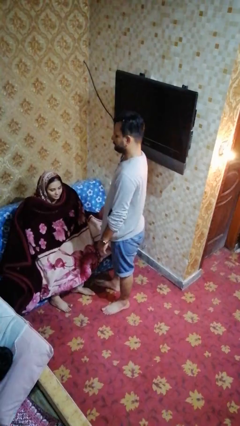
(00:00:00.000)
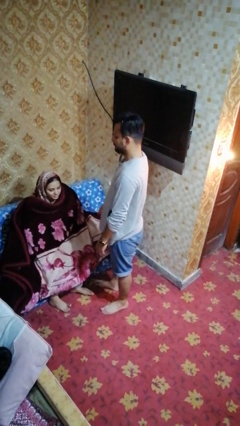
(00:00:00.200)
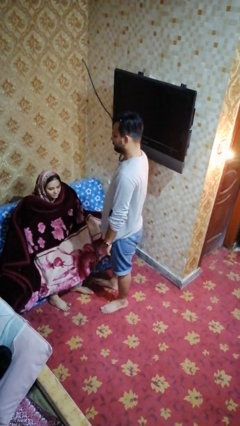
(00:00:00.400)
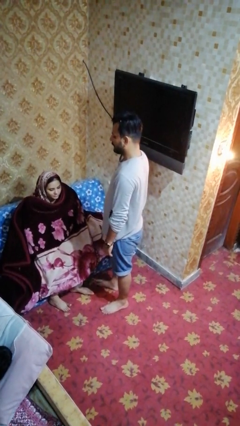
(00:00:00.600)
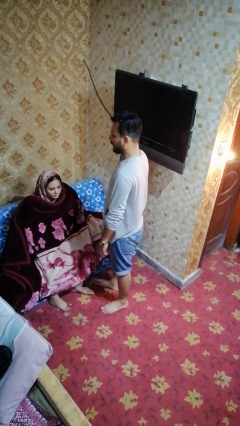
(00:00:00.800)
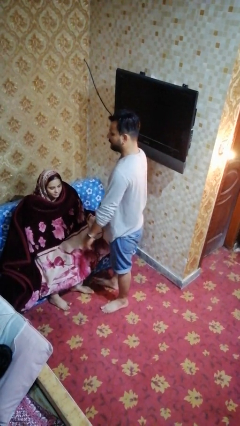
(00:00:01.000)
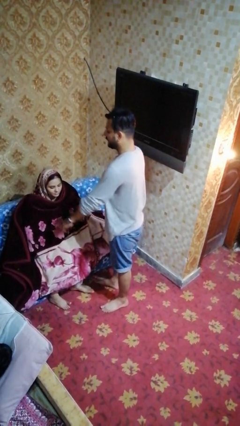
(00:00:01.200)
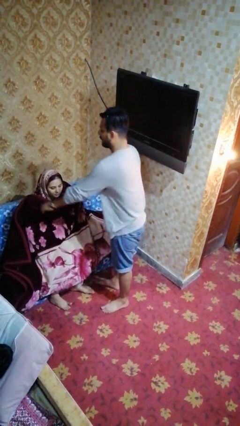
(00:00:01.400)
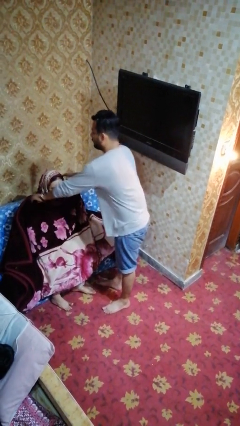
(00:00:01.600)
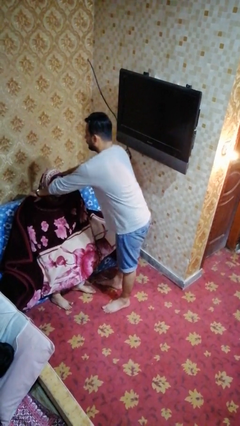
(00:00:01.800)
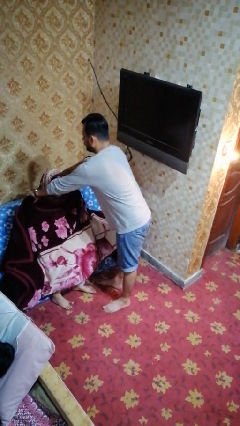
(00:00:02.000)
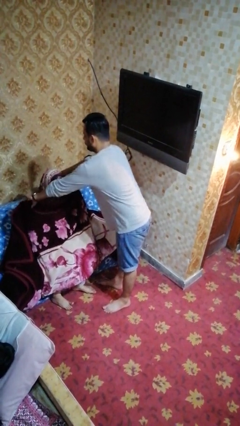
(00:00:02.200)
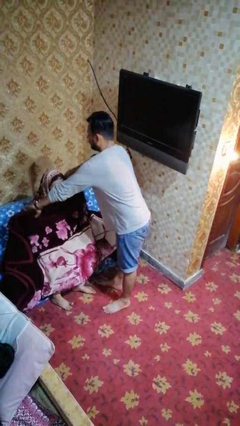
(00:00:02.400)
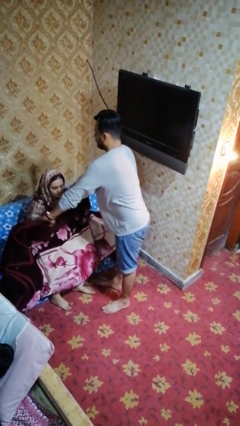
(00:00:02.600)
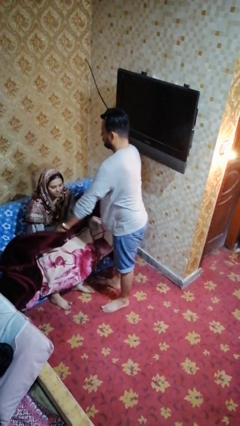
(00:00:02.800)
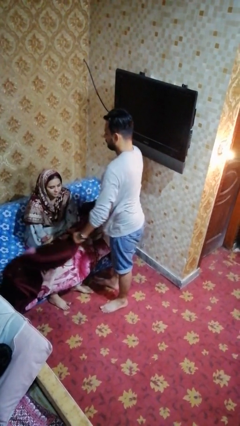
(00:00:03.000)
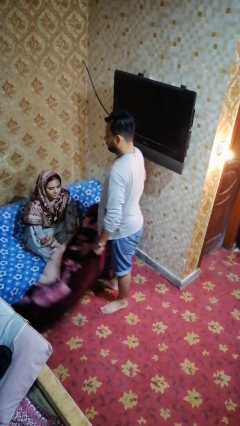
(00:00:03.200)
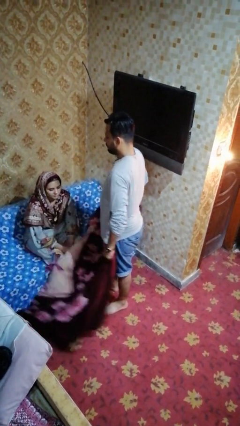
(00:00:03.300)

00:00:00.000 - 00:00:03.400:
person uncovers friend with blanket

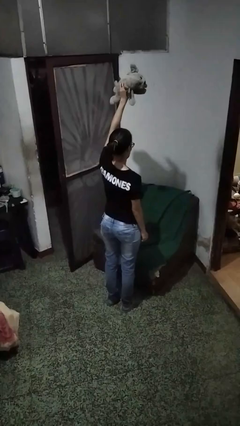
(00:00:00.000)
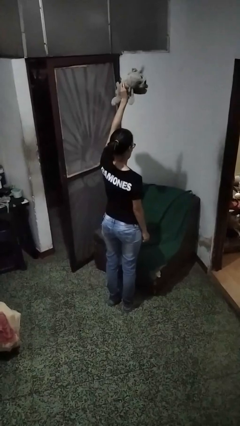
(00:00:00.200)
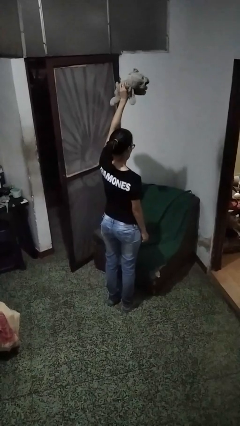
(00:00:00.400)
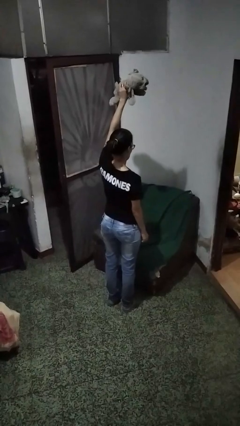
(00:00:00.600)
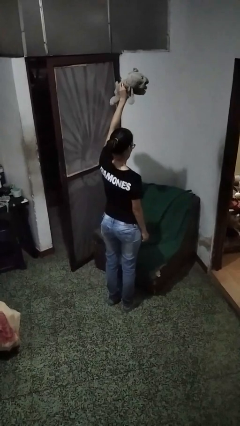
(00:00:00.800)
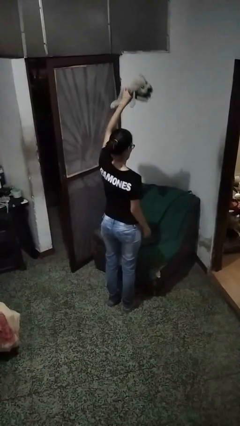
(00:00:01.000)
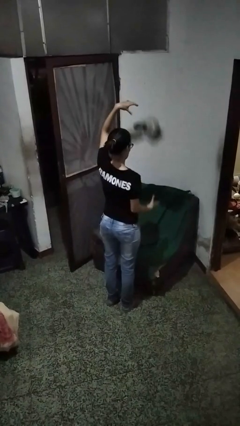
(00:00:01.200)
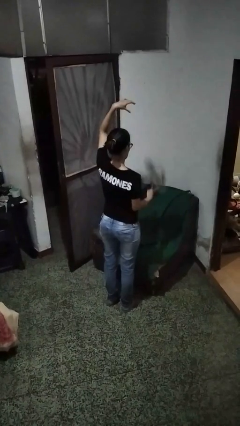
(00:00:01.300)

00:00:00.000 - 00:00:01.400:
person drops object

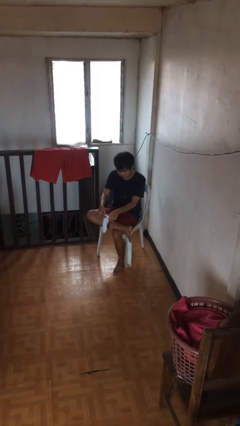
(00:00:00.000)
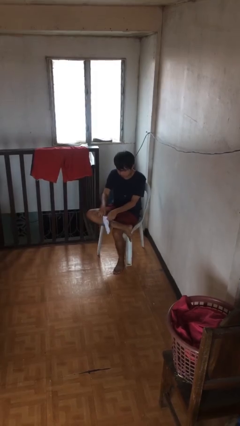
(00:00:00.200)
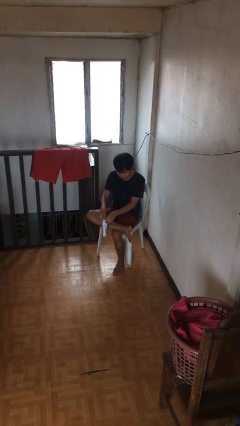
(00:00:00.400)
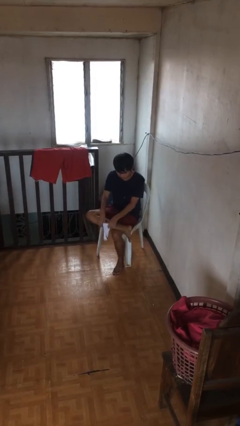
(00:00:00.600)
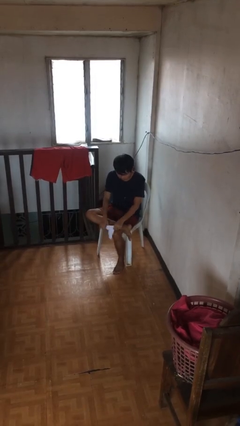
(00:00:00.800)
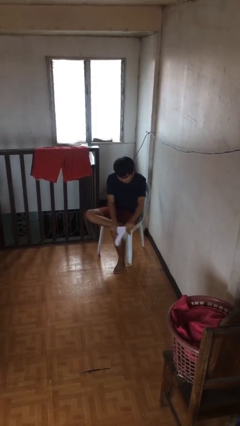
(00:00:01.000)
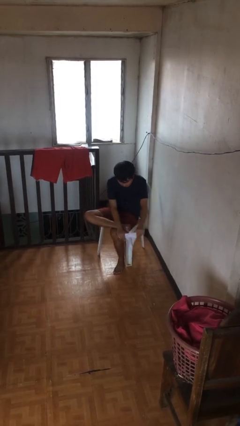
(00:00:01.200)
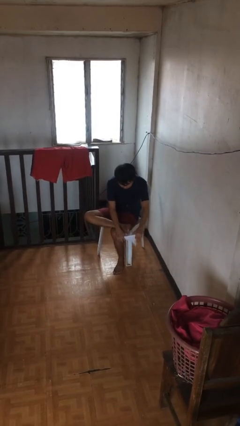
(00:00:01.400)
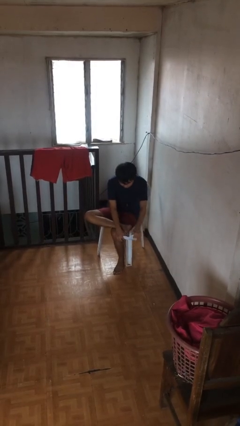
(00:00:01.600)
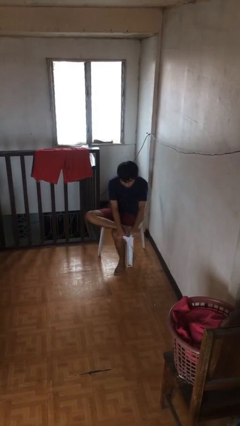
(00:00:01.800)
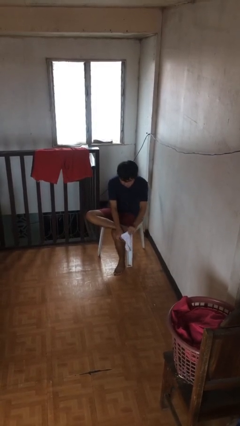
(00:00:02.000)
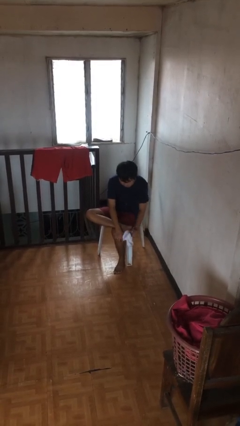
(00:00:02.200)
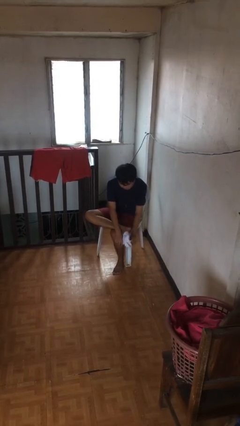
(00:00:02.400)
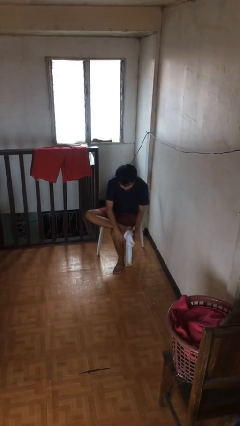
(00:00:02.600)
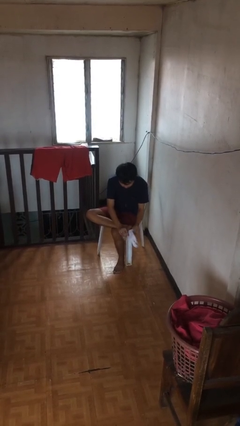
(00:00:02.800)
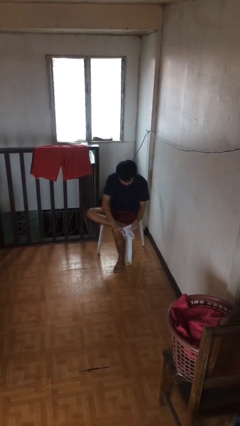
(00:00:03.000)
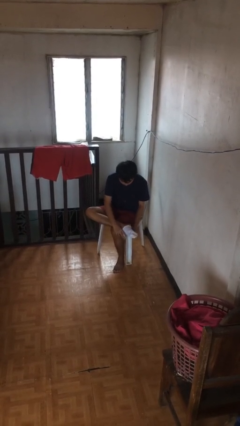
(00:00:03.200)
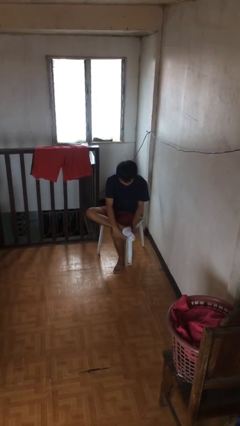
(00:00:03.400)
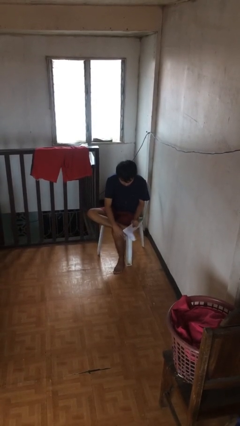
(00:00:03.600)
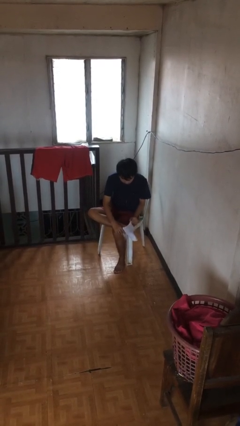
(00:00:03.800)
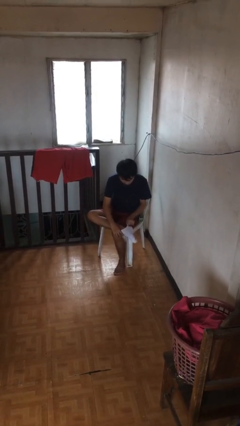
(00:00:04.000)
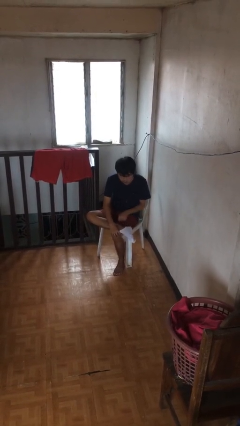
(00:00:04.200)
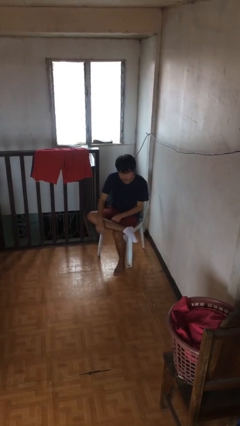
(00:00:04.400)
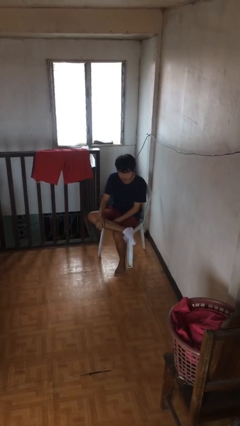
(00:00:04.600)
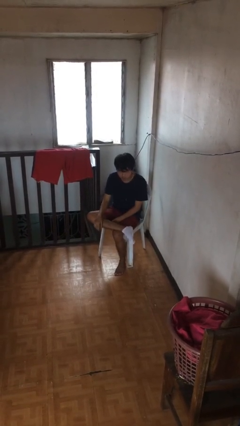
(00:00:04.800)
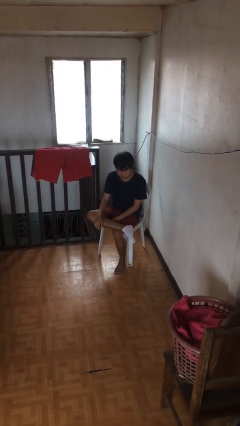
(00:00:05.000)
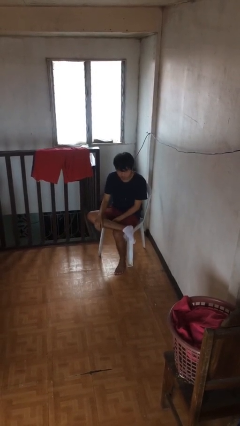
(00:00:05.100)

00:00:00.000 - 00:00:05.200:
person puts on socks

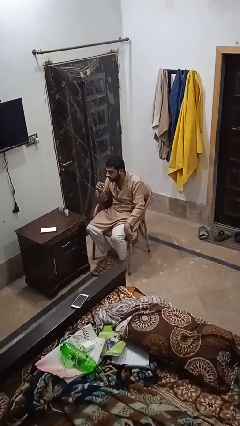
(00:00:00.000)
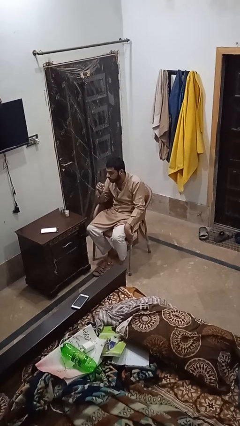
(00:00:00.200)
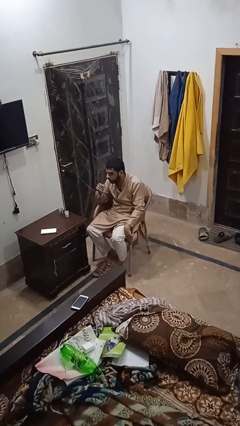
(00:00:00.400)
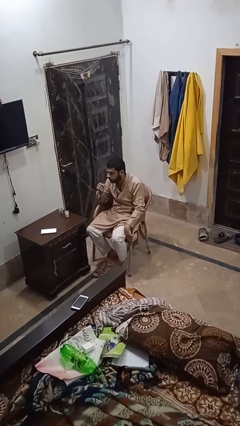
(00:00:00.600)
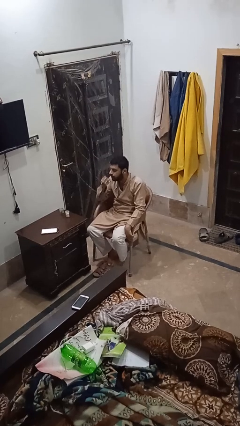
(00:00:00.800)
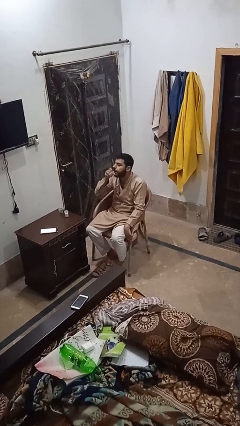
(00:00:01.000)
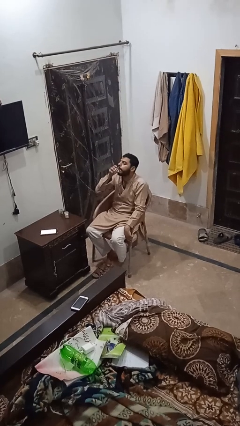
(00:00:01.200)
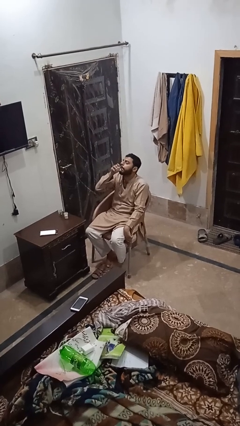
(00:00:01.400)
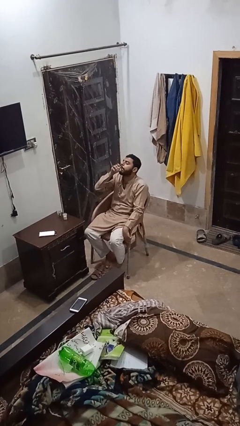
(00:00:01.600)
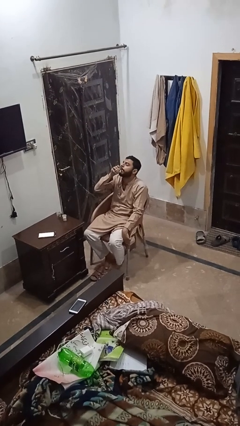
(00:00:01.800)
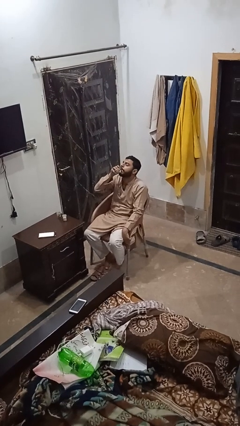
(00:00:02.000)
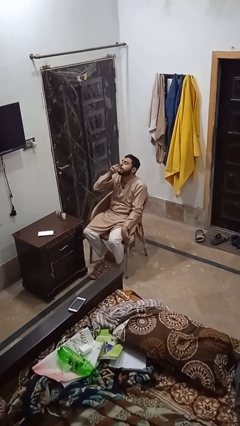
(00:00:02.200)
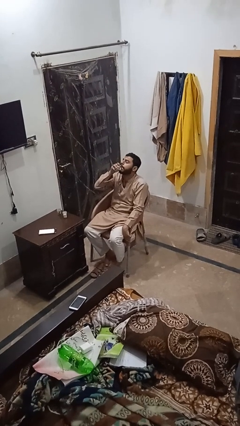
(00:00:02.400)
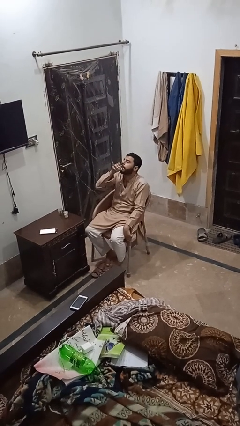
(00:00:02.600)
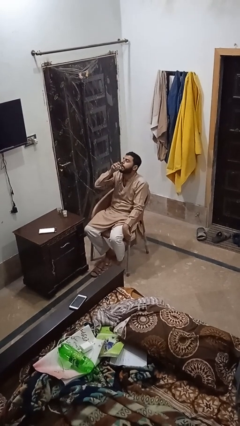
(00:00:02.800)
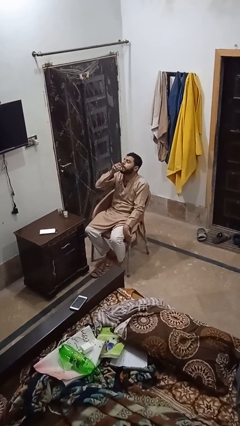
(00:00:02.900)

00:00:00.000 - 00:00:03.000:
person drinks from shotglass

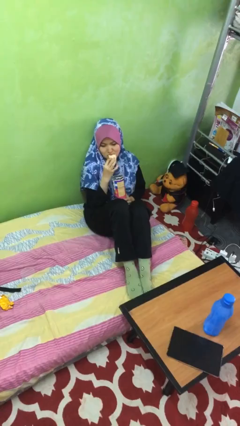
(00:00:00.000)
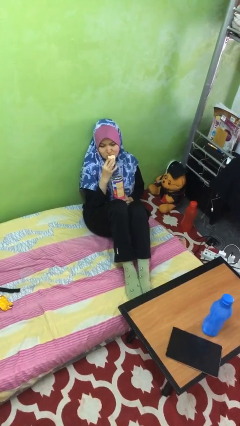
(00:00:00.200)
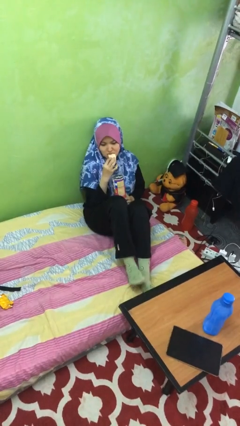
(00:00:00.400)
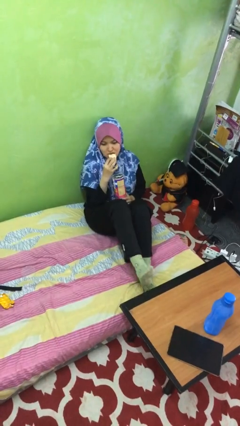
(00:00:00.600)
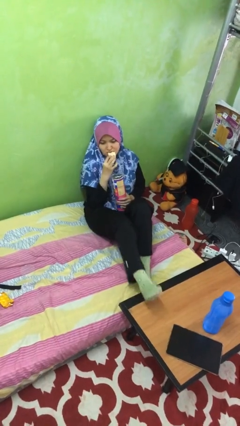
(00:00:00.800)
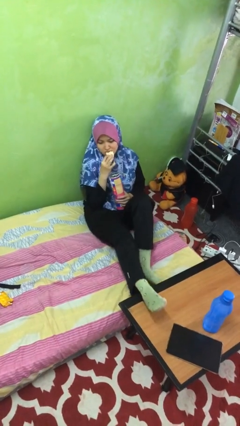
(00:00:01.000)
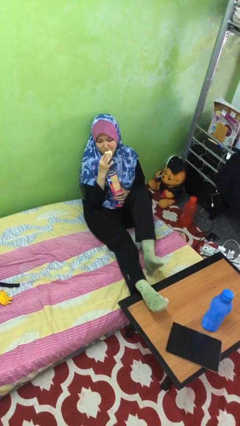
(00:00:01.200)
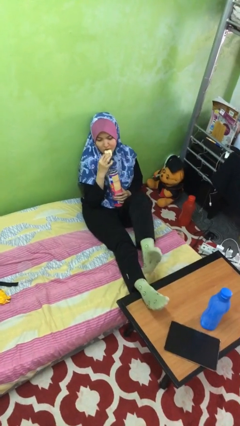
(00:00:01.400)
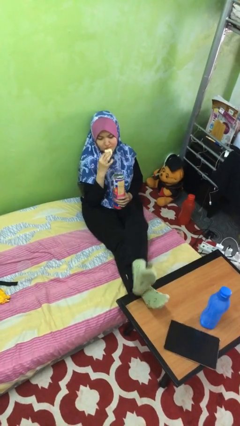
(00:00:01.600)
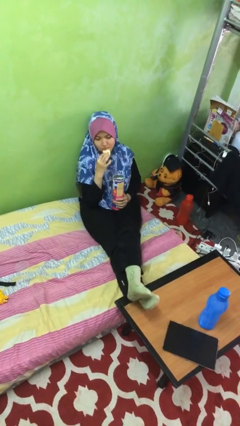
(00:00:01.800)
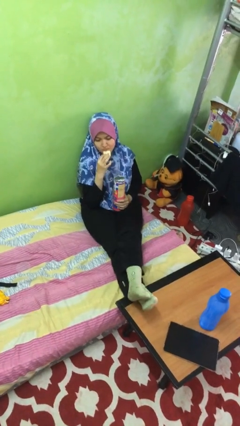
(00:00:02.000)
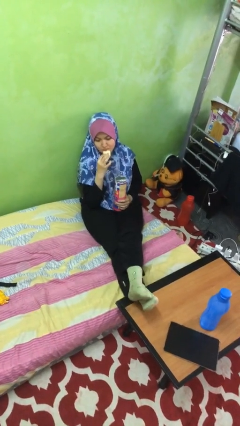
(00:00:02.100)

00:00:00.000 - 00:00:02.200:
person puts feet up

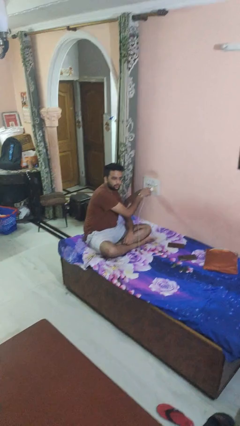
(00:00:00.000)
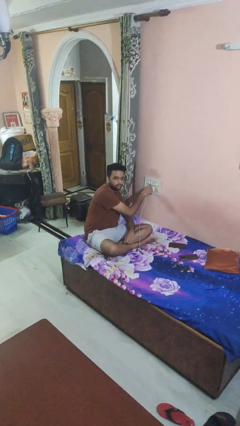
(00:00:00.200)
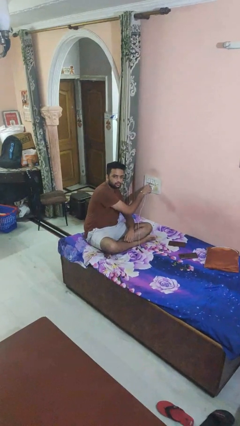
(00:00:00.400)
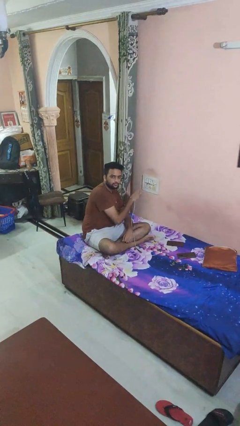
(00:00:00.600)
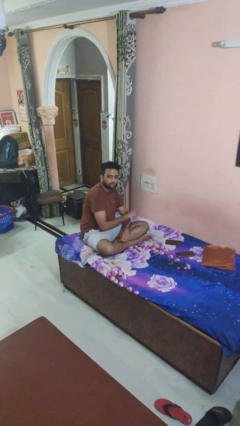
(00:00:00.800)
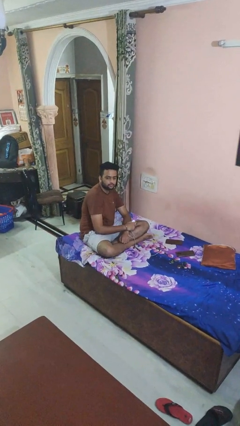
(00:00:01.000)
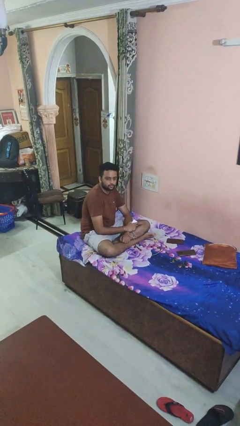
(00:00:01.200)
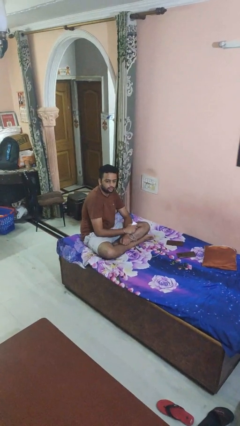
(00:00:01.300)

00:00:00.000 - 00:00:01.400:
person unplugs from electrical socket

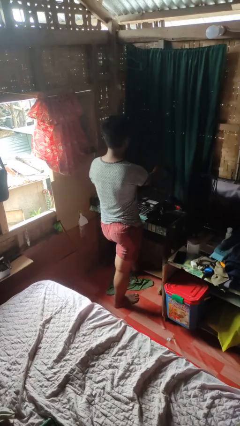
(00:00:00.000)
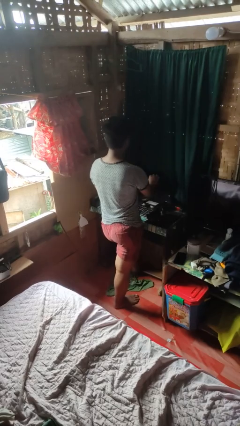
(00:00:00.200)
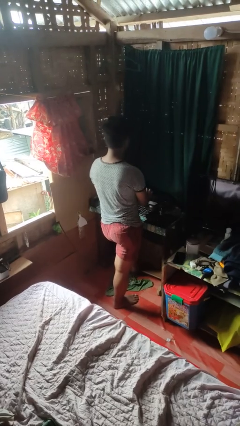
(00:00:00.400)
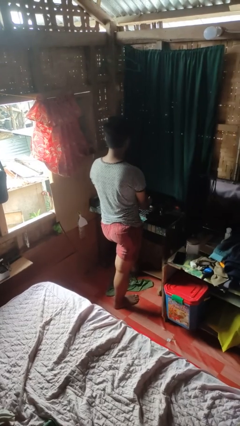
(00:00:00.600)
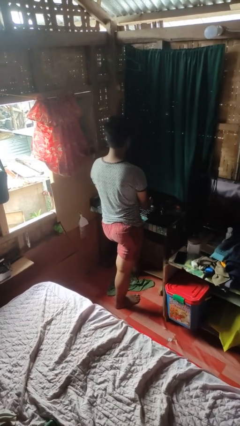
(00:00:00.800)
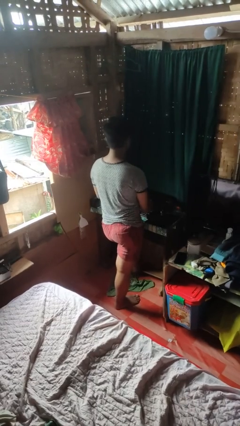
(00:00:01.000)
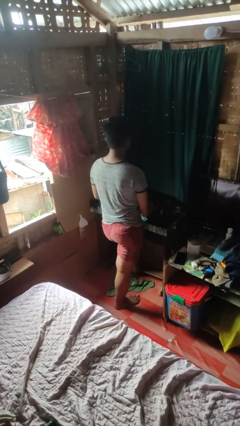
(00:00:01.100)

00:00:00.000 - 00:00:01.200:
person closes laptop
